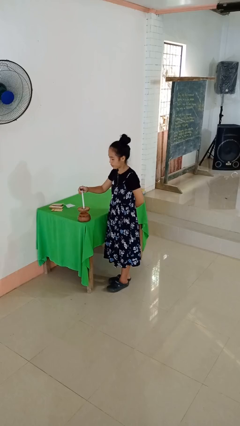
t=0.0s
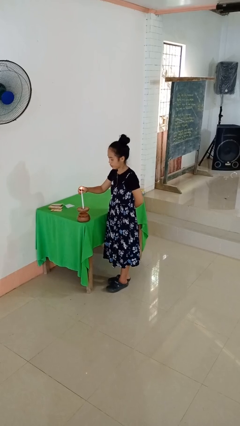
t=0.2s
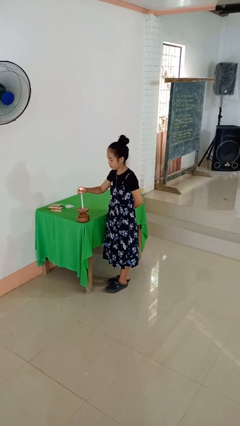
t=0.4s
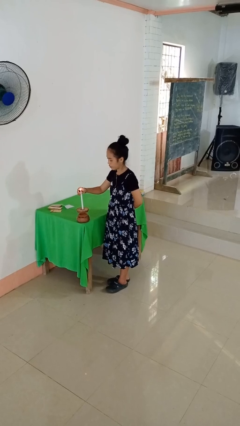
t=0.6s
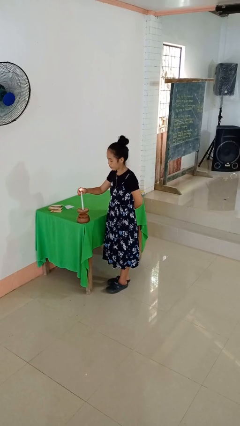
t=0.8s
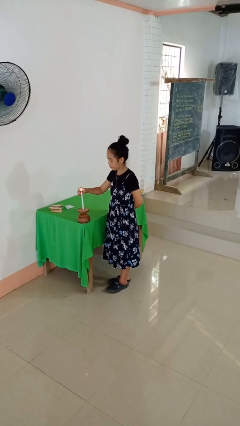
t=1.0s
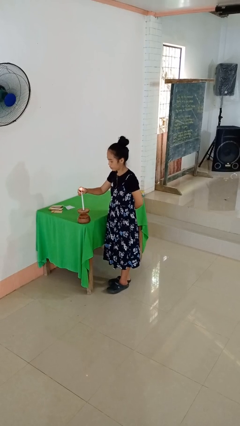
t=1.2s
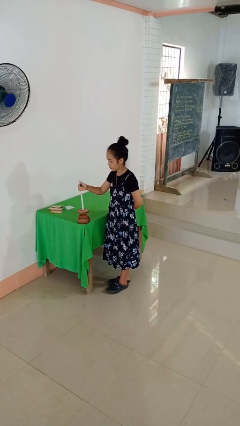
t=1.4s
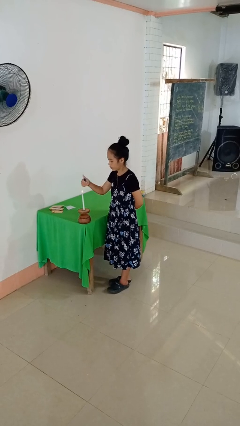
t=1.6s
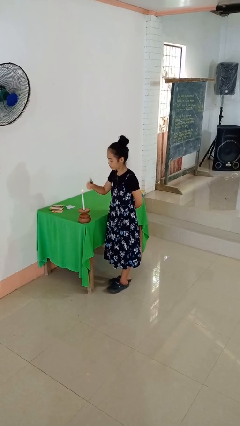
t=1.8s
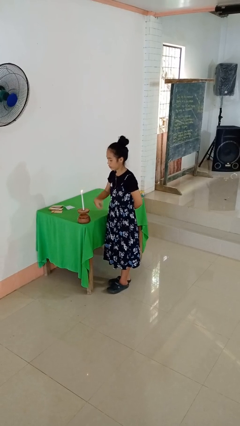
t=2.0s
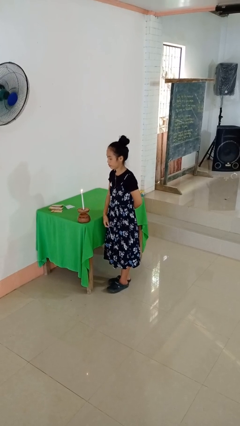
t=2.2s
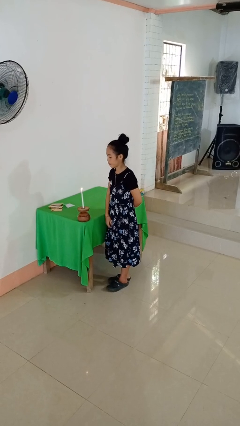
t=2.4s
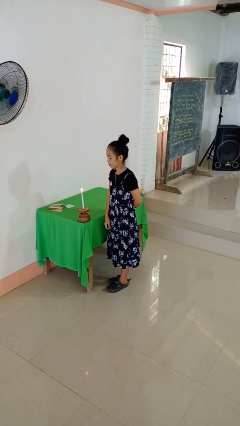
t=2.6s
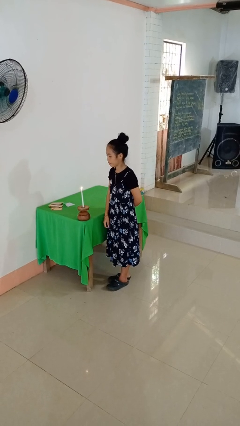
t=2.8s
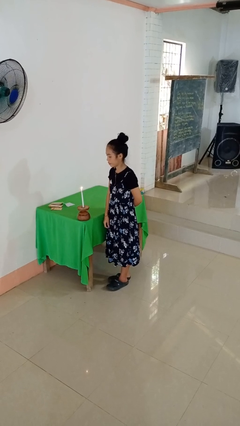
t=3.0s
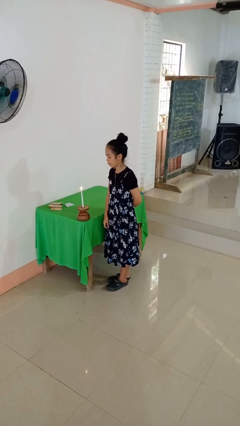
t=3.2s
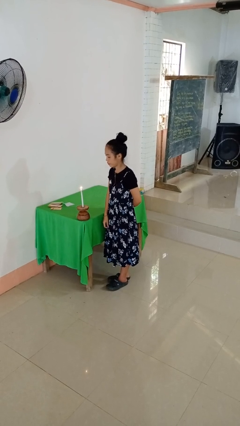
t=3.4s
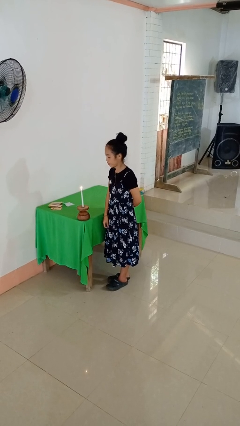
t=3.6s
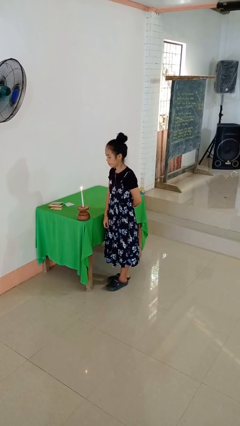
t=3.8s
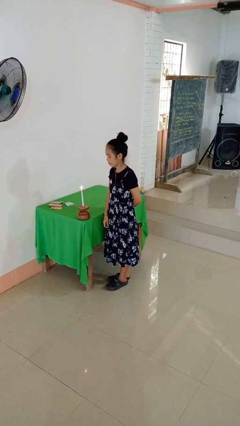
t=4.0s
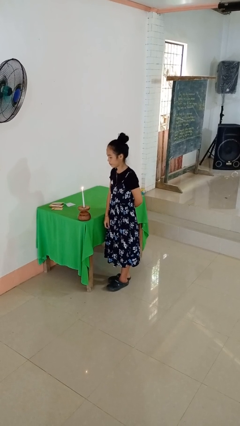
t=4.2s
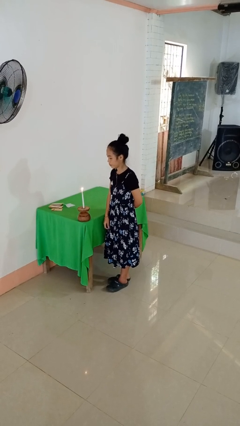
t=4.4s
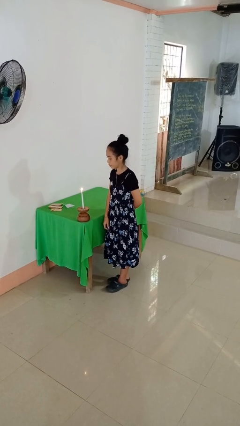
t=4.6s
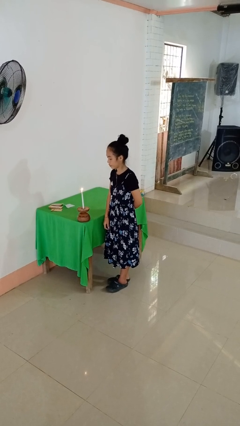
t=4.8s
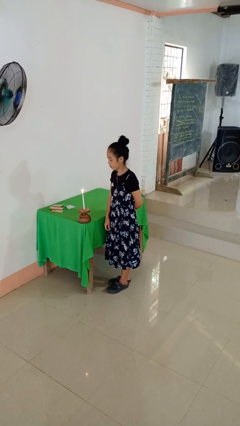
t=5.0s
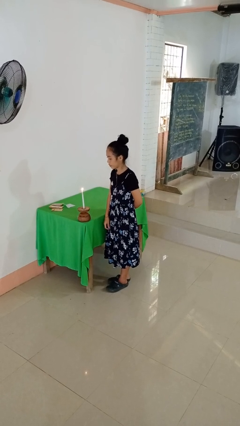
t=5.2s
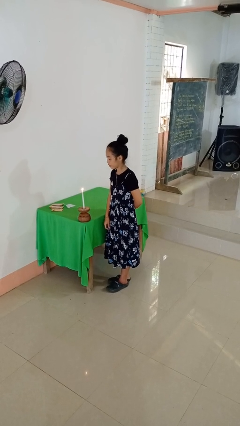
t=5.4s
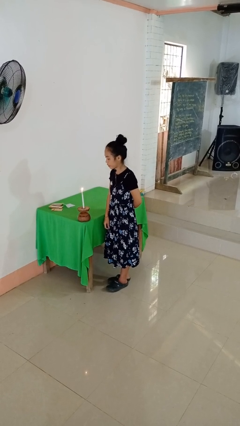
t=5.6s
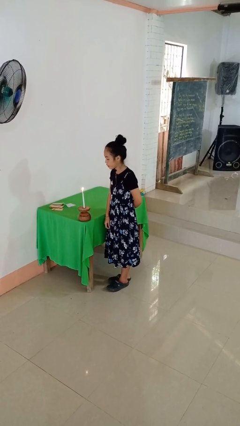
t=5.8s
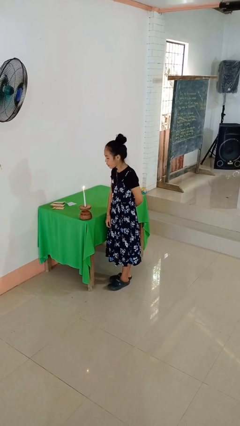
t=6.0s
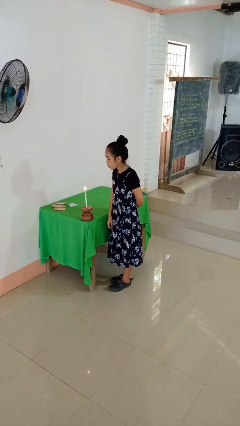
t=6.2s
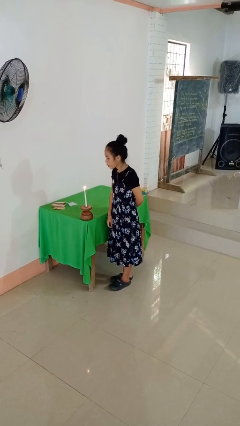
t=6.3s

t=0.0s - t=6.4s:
person lights candle

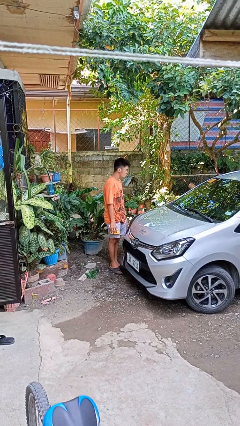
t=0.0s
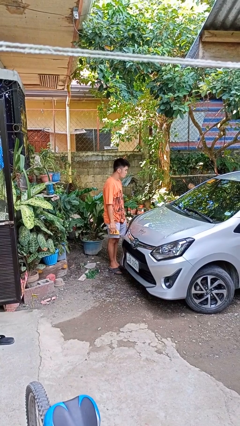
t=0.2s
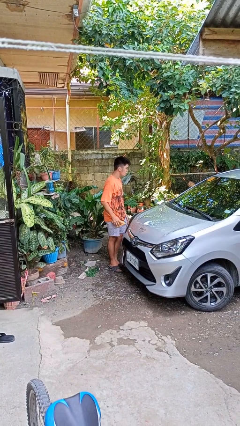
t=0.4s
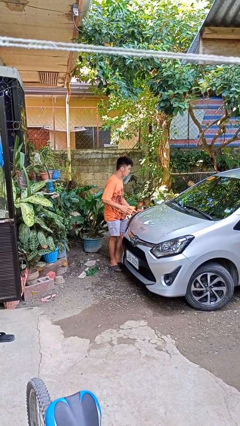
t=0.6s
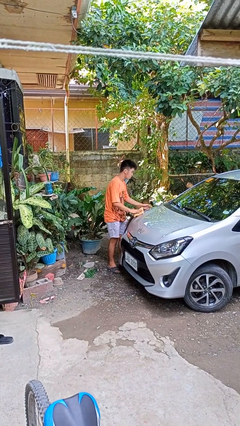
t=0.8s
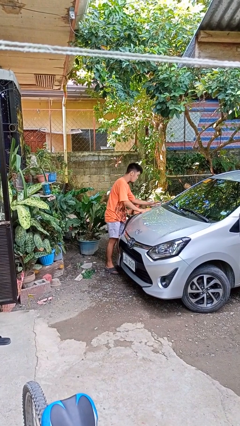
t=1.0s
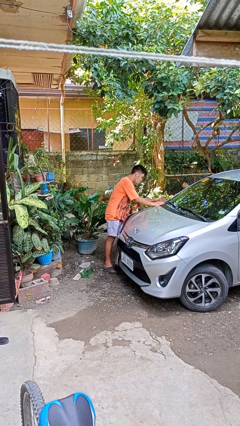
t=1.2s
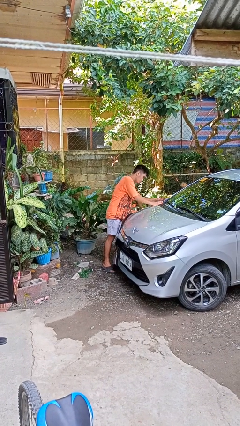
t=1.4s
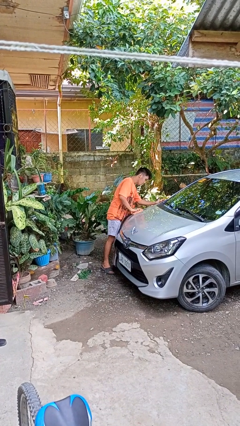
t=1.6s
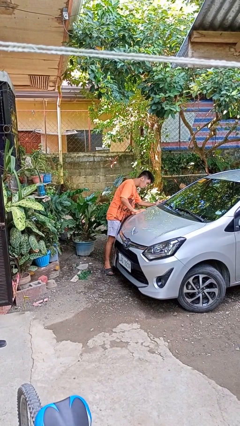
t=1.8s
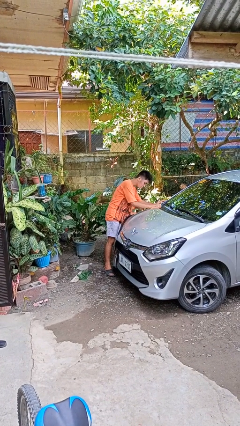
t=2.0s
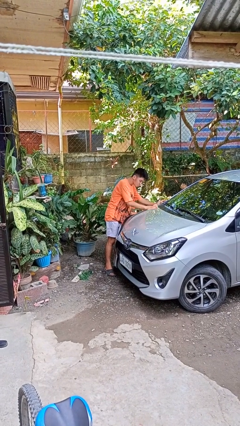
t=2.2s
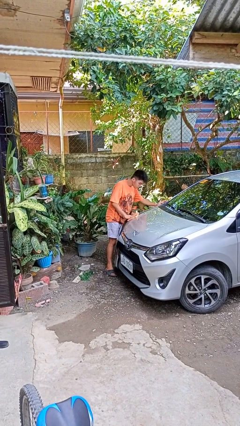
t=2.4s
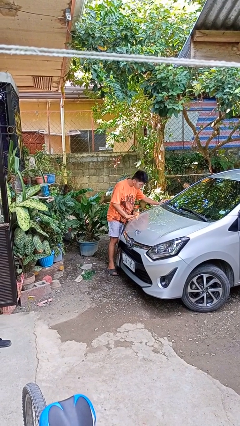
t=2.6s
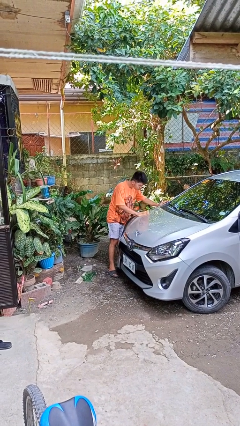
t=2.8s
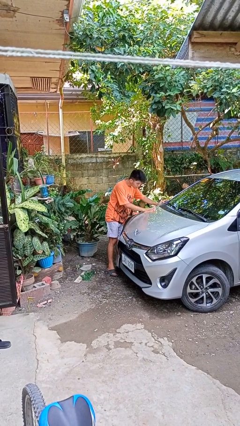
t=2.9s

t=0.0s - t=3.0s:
person polishes car with rag

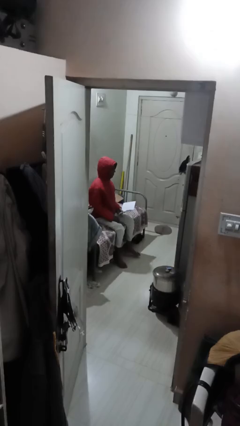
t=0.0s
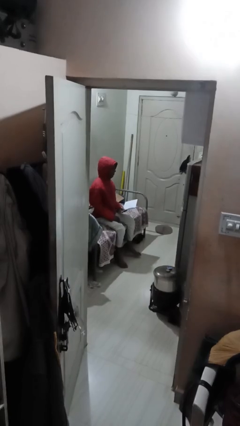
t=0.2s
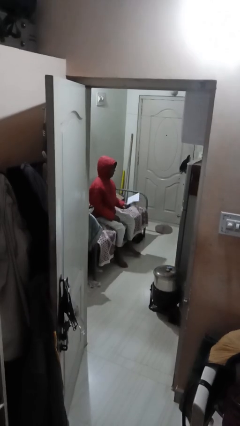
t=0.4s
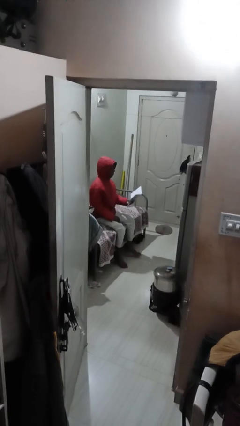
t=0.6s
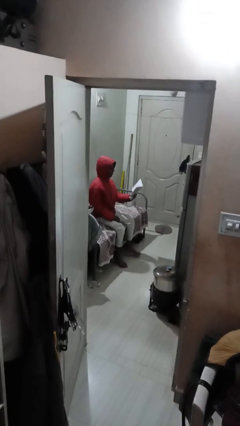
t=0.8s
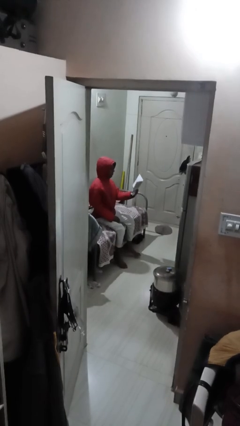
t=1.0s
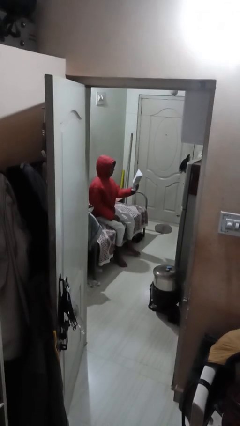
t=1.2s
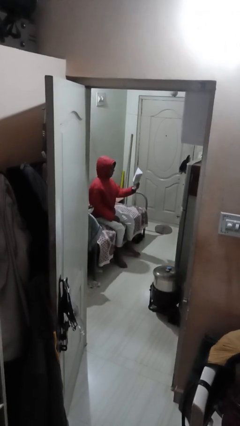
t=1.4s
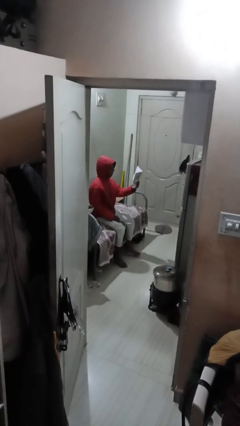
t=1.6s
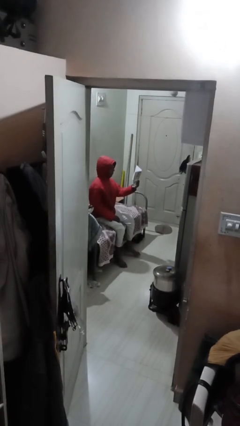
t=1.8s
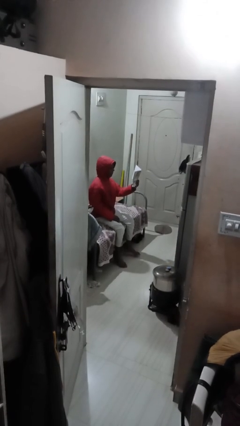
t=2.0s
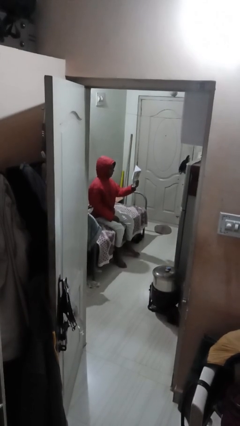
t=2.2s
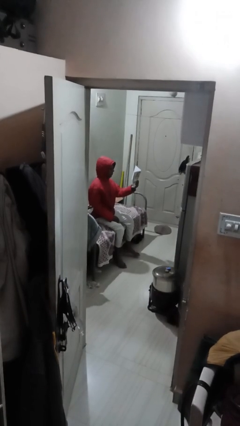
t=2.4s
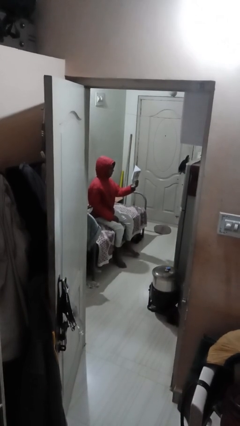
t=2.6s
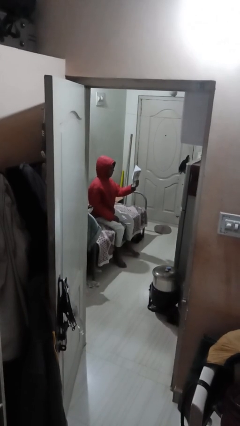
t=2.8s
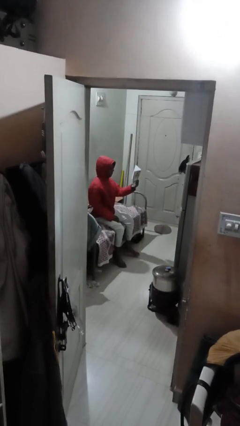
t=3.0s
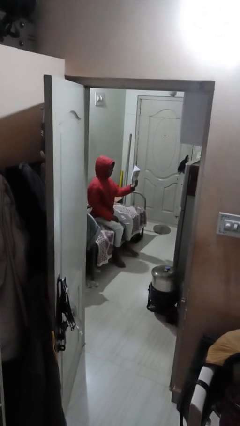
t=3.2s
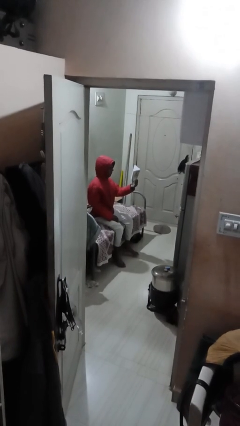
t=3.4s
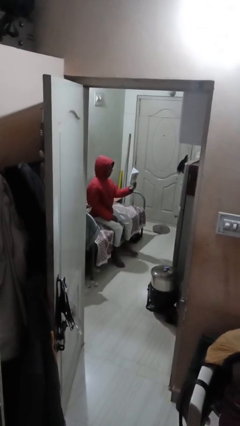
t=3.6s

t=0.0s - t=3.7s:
person reads document

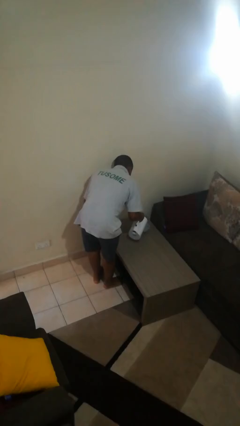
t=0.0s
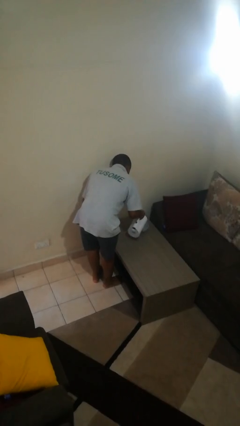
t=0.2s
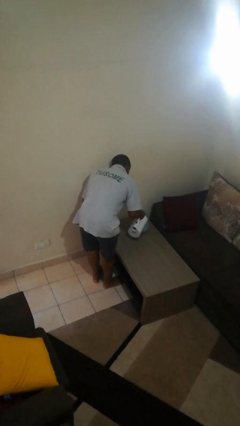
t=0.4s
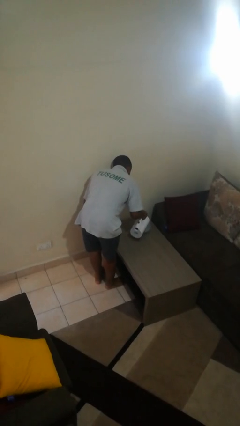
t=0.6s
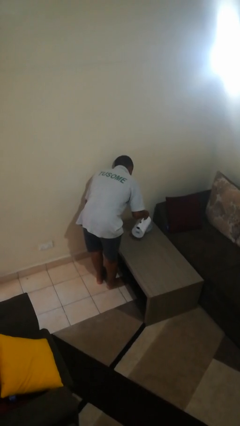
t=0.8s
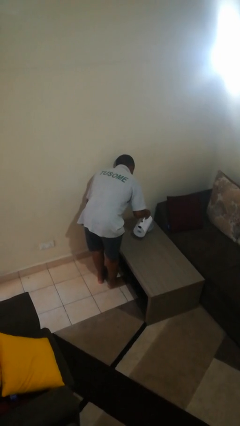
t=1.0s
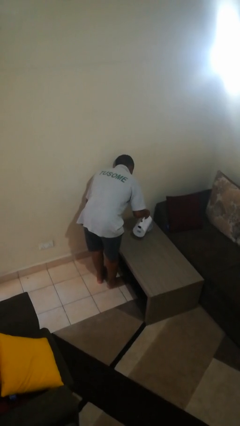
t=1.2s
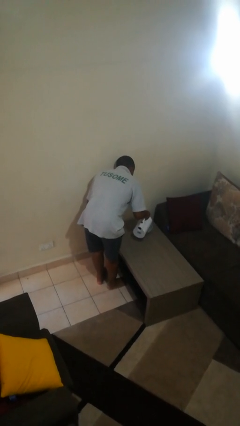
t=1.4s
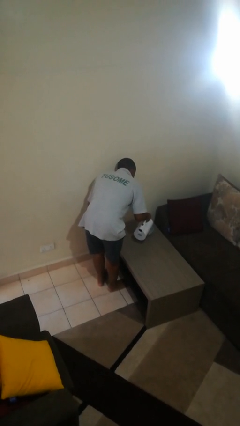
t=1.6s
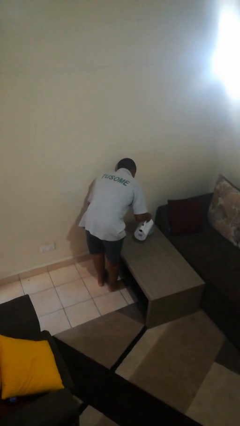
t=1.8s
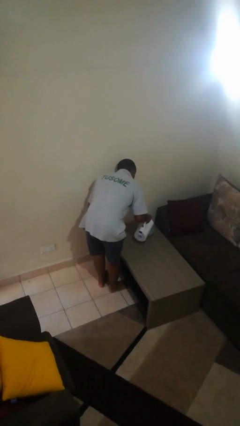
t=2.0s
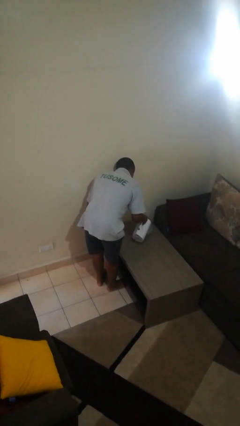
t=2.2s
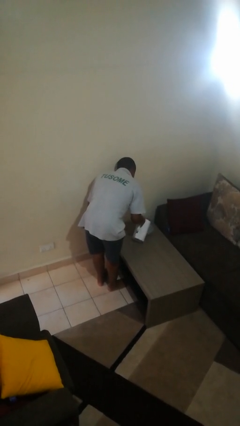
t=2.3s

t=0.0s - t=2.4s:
person pours into bowl

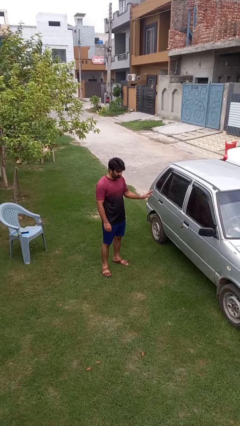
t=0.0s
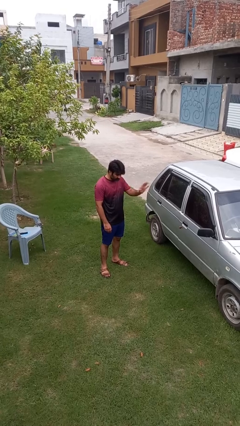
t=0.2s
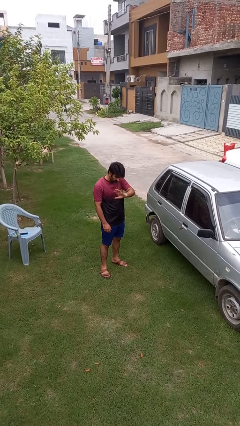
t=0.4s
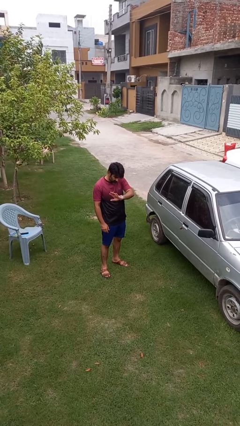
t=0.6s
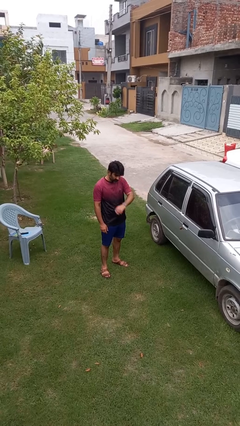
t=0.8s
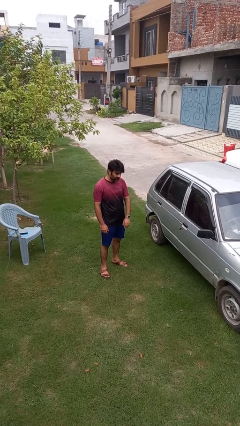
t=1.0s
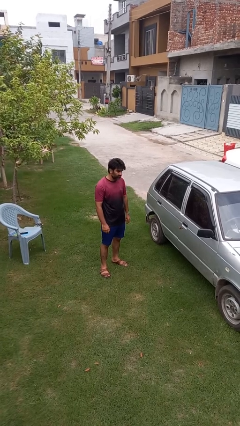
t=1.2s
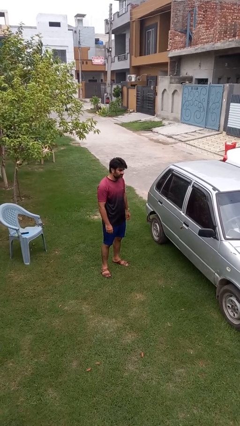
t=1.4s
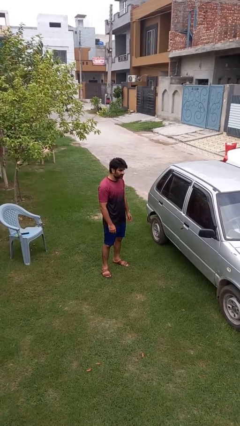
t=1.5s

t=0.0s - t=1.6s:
person gestures swipe right

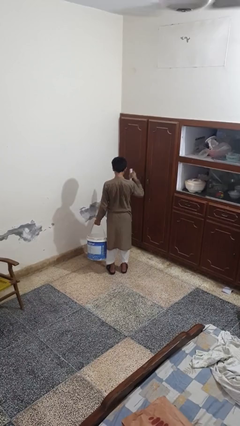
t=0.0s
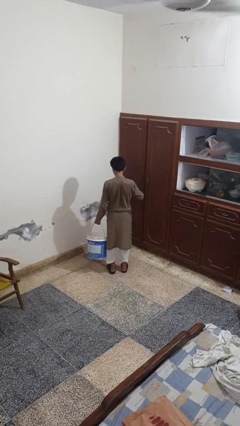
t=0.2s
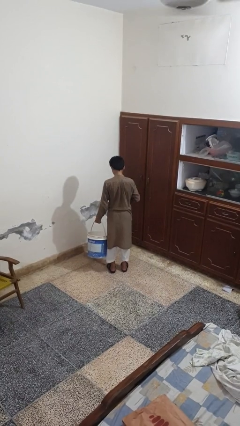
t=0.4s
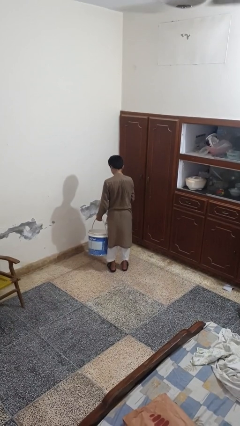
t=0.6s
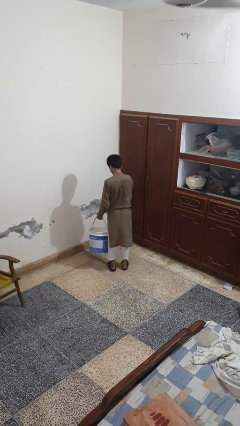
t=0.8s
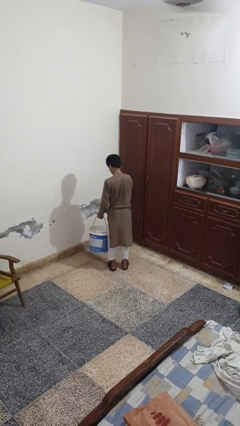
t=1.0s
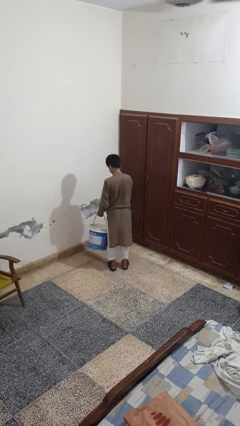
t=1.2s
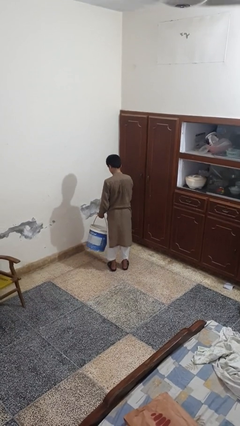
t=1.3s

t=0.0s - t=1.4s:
person puts object into basket
